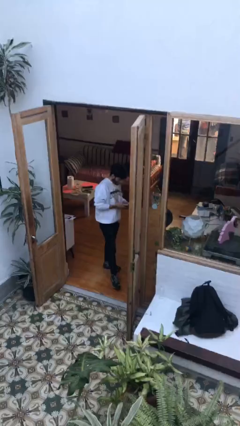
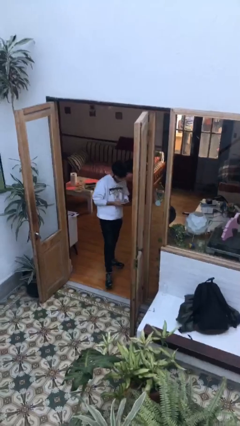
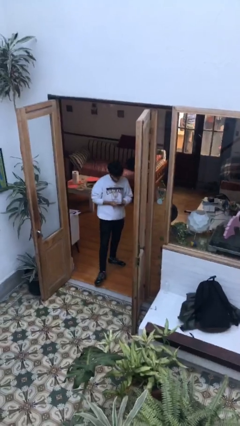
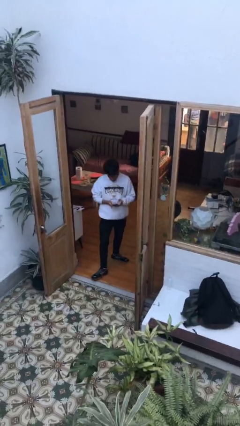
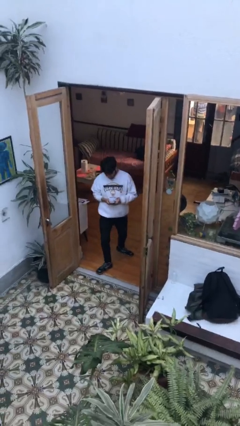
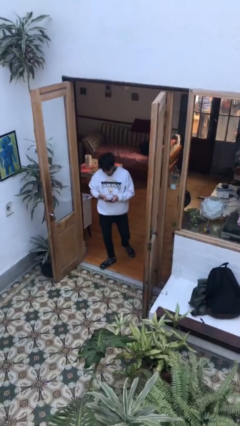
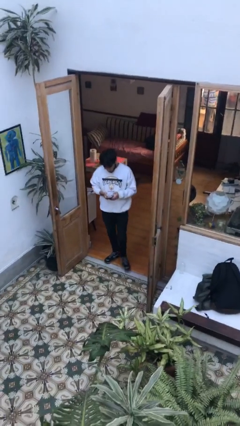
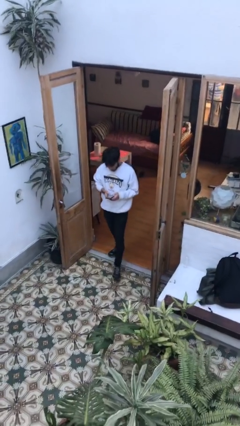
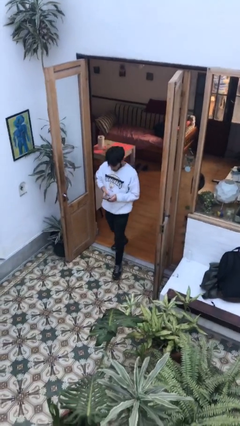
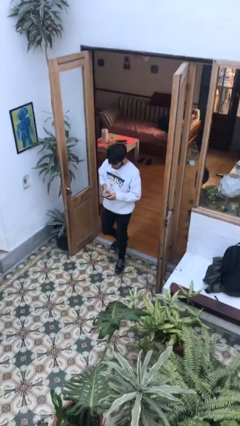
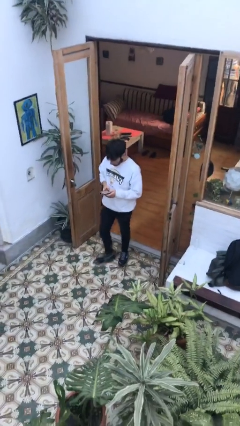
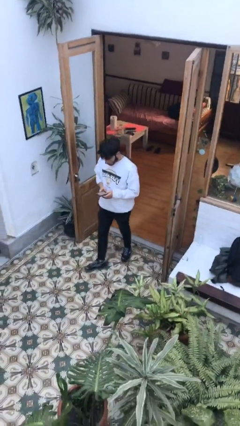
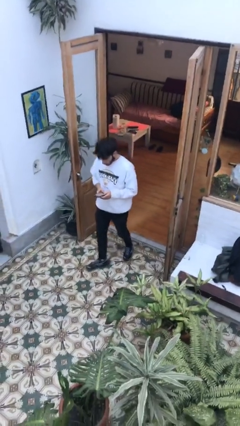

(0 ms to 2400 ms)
person enters scene through structure

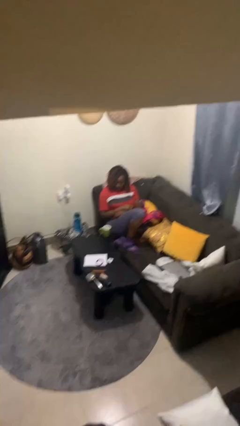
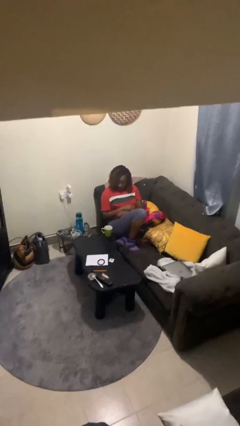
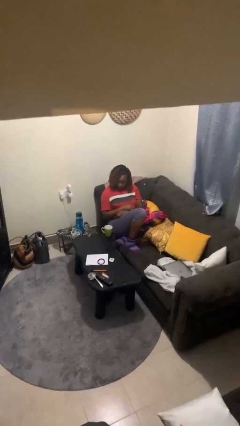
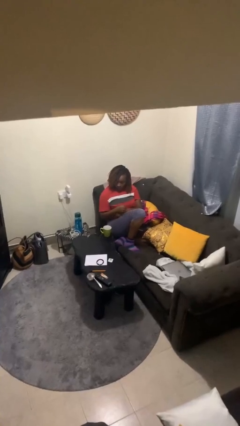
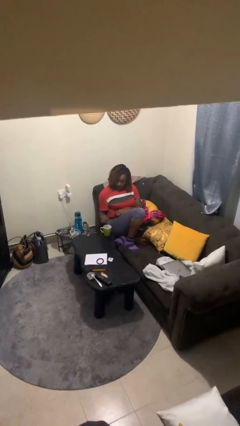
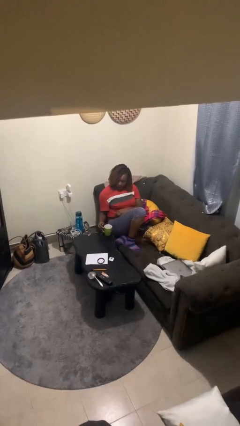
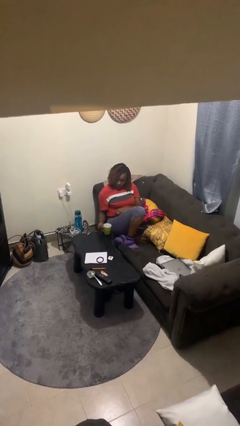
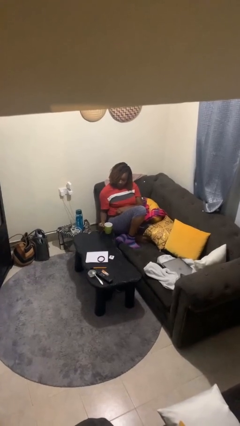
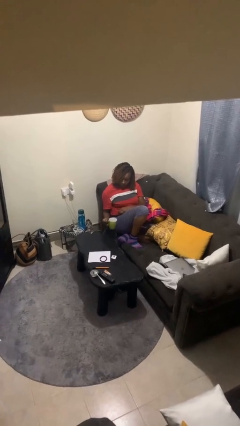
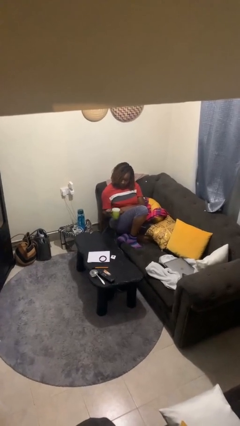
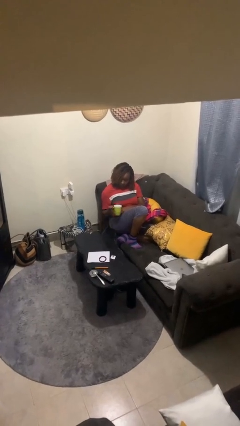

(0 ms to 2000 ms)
person picks up object from table

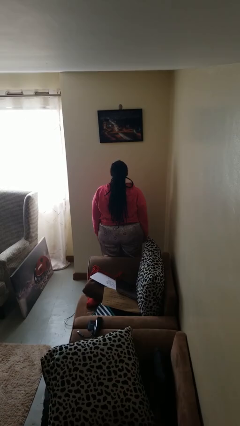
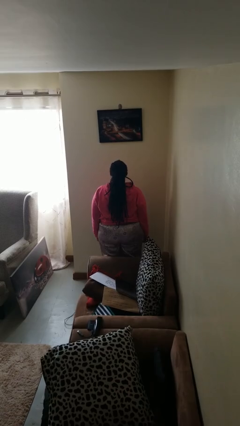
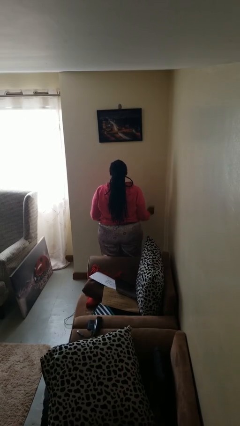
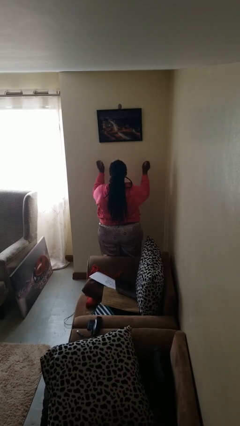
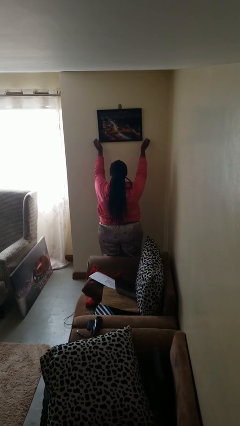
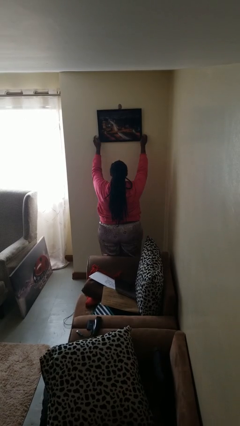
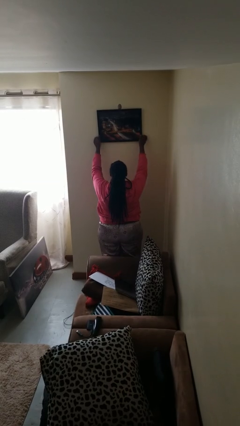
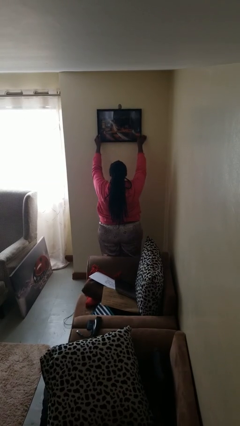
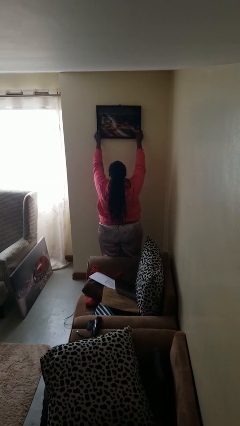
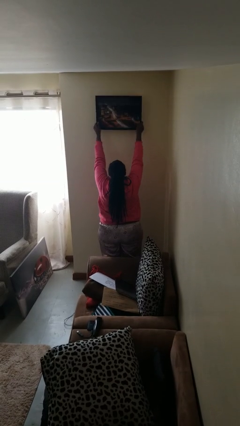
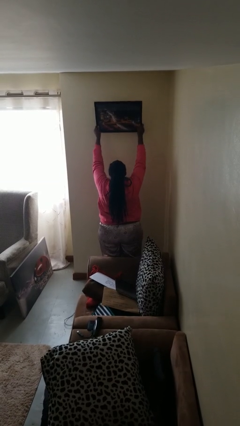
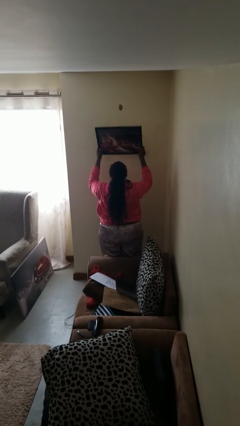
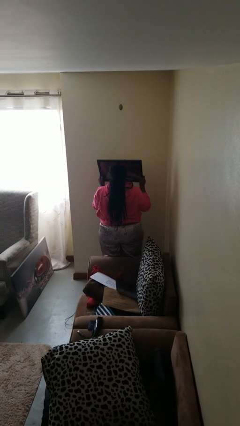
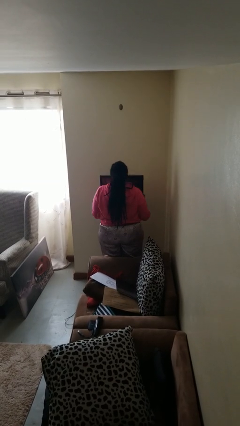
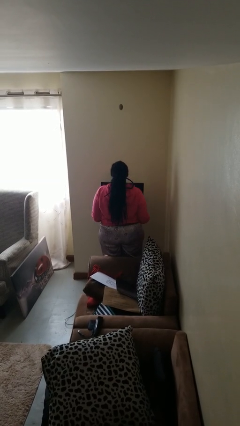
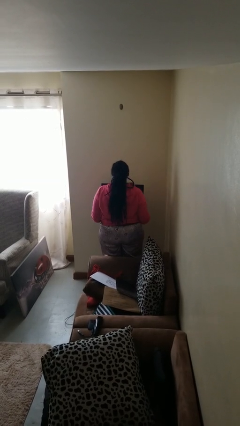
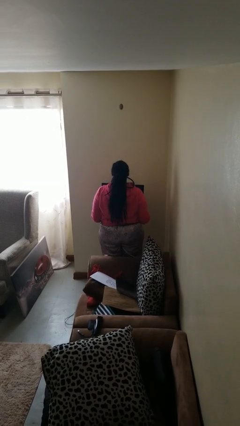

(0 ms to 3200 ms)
person takes down picture frame

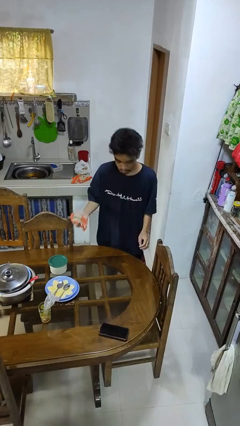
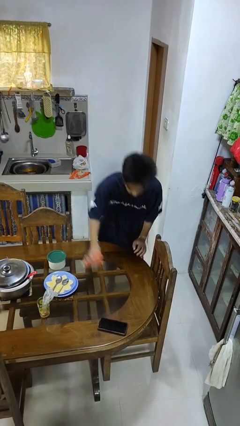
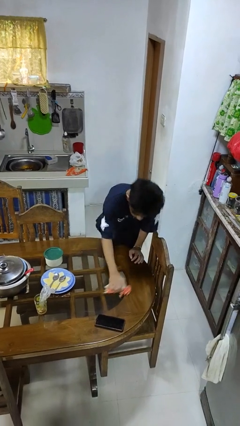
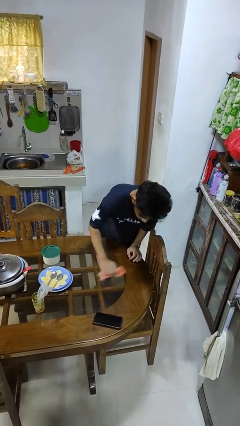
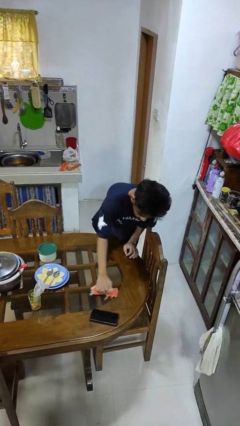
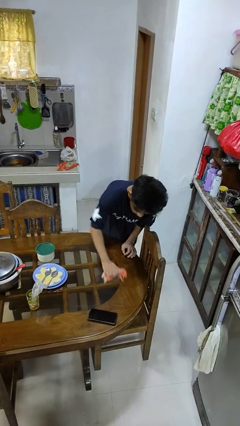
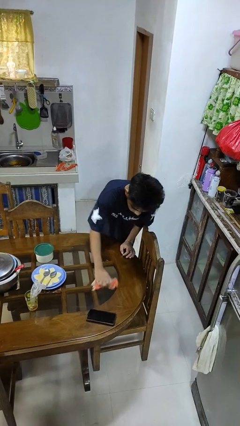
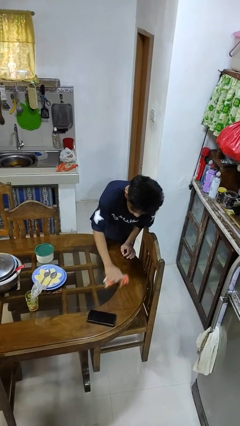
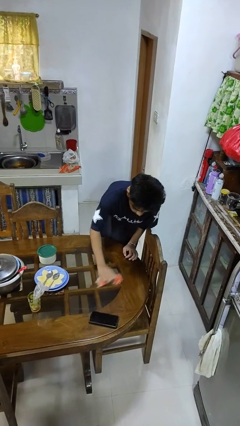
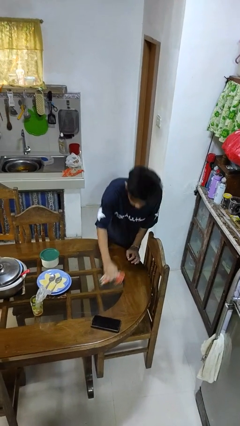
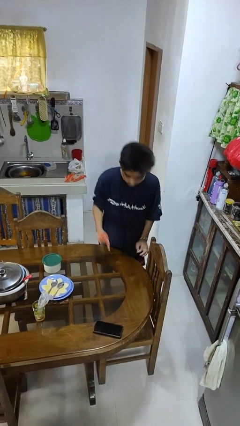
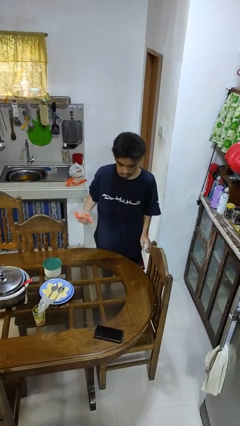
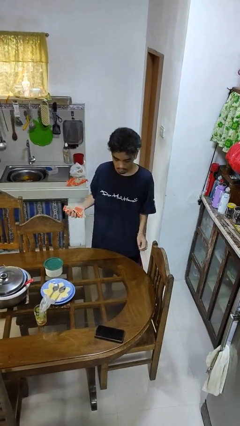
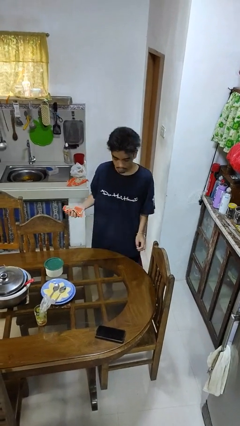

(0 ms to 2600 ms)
person cleans table with rag

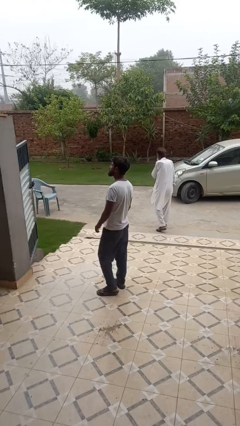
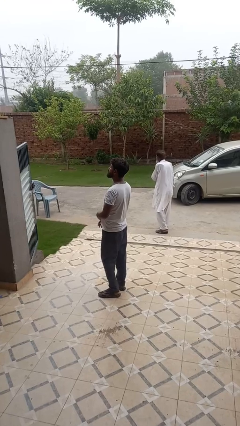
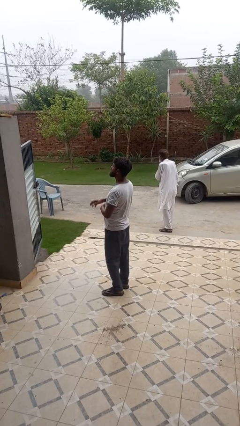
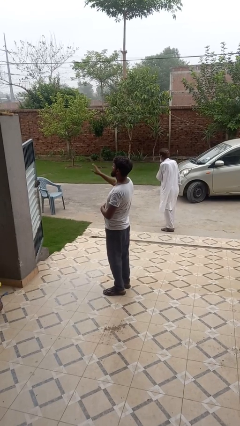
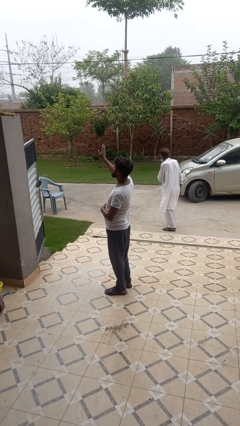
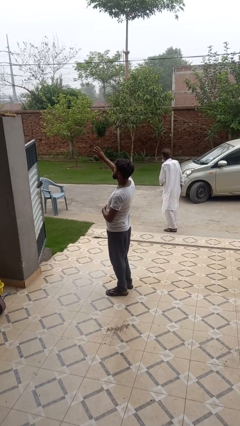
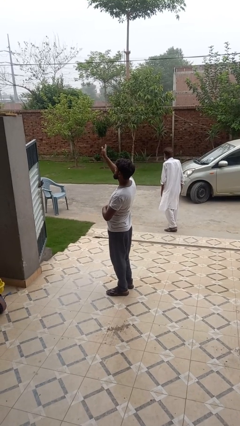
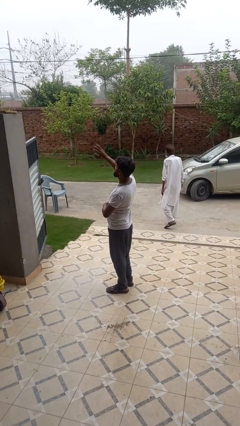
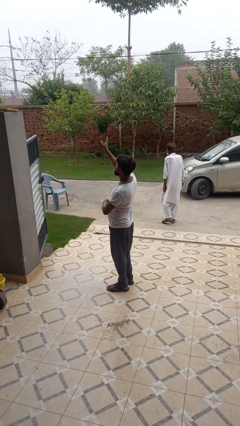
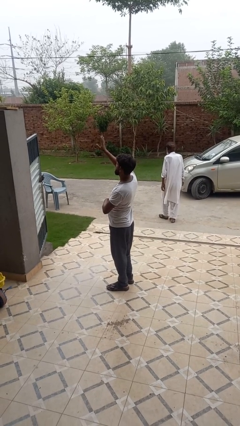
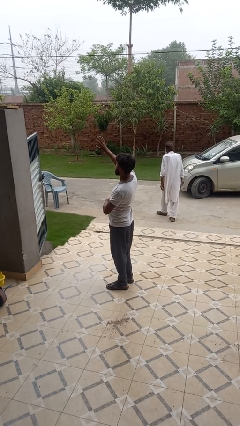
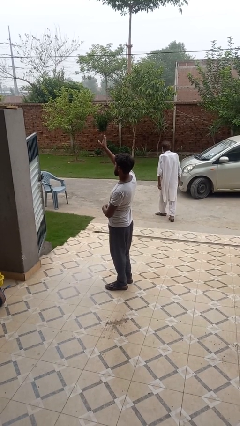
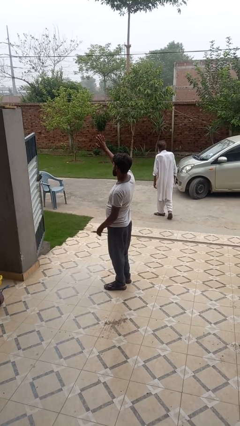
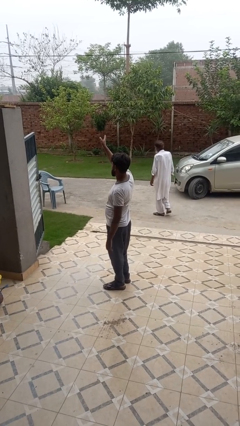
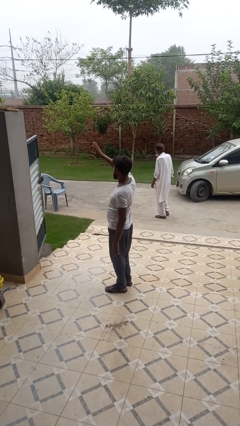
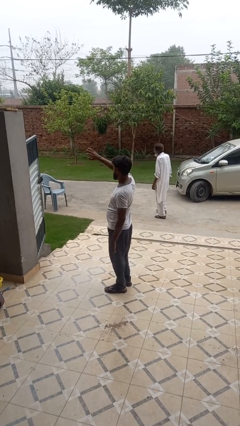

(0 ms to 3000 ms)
person waves at person

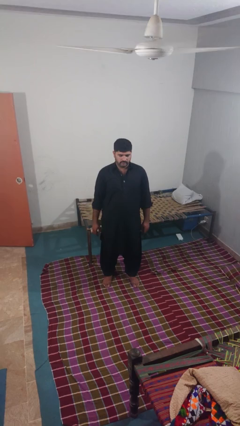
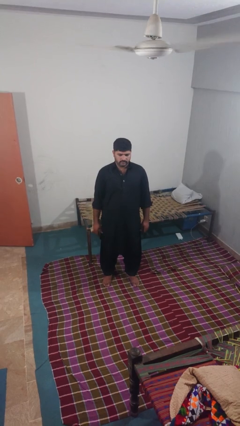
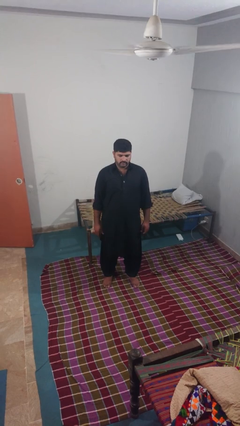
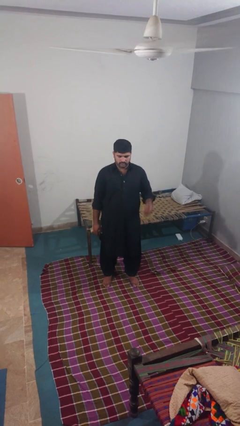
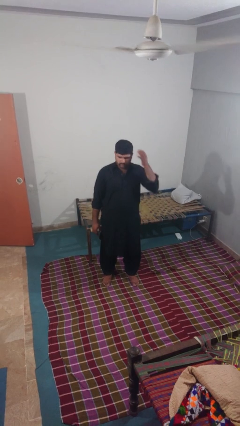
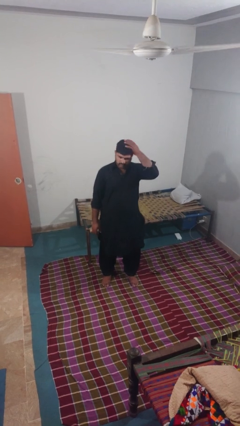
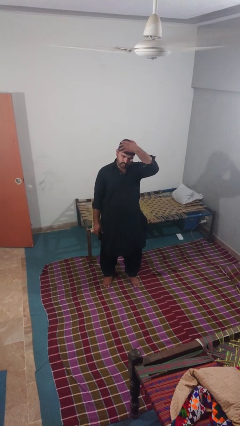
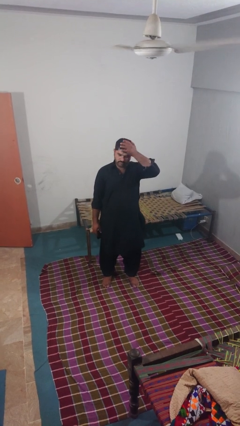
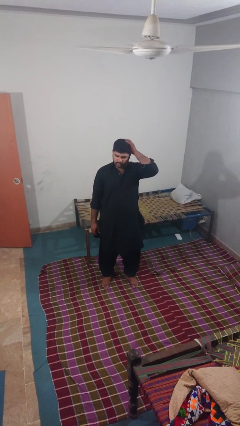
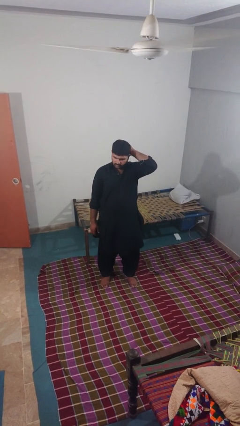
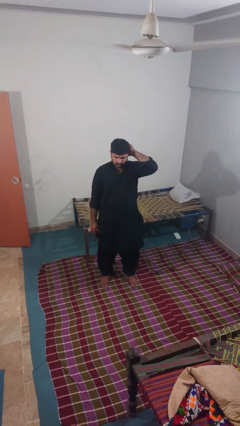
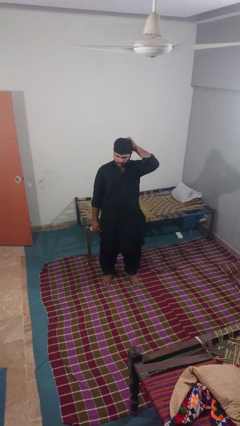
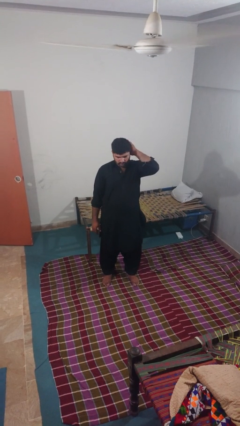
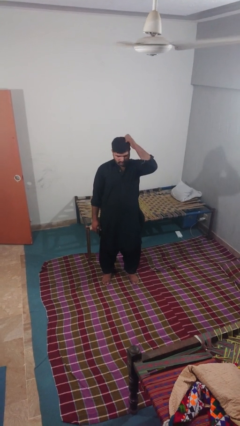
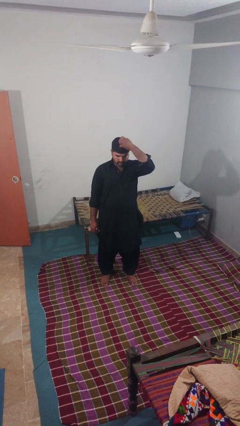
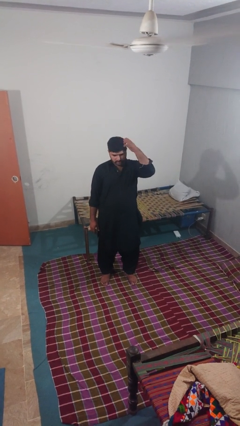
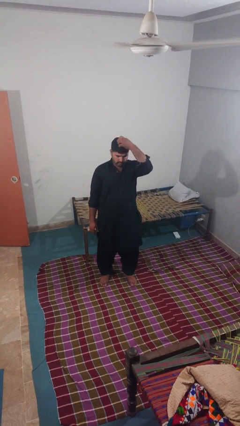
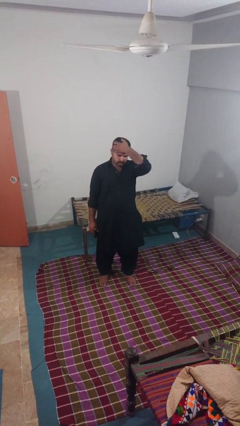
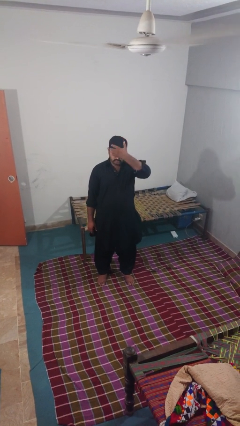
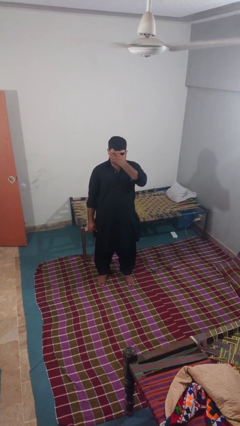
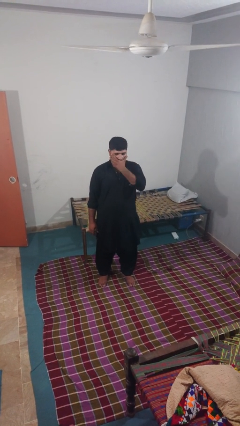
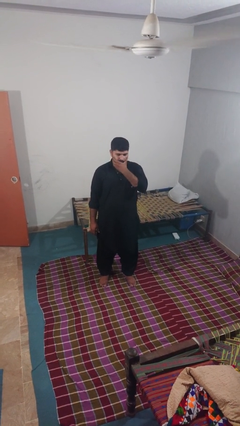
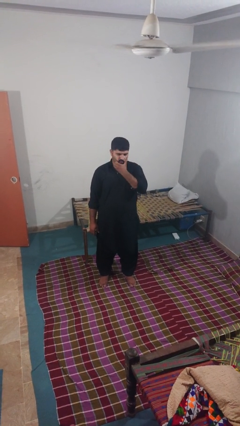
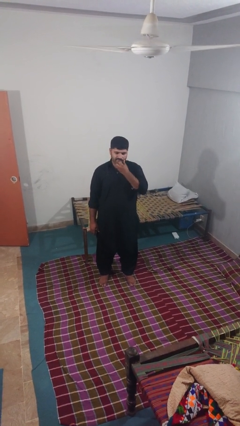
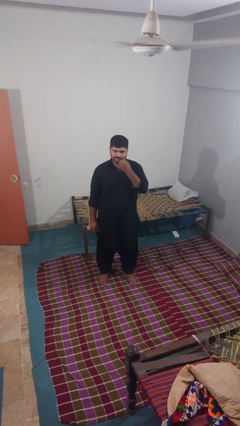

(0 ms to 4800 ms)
person scratches face
